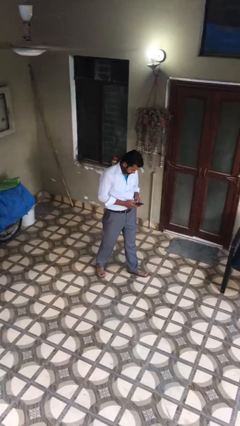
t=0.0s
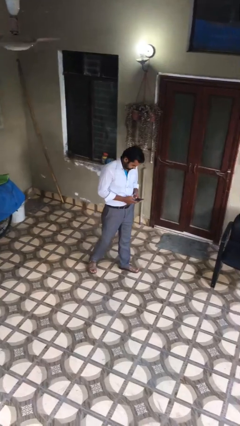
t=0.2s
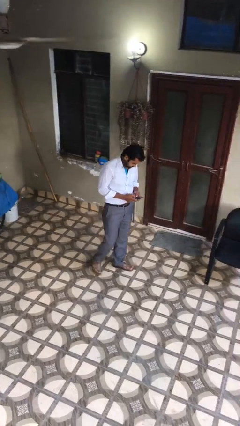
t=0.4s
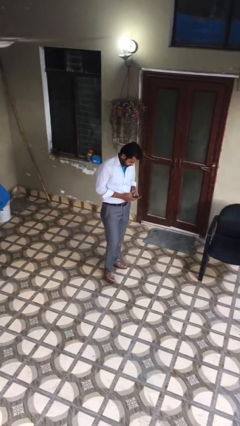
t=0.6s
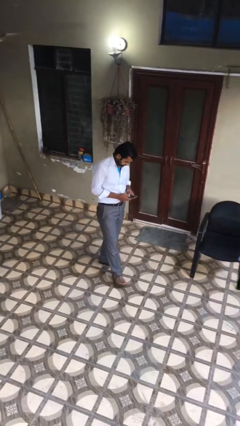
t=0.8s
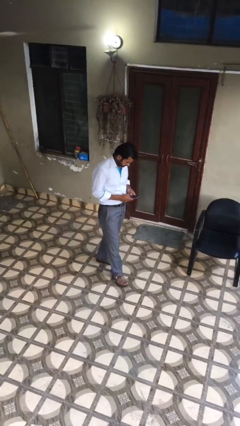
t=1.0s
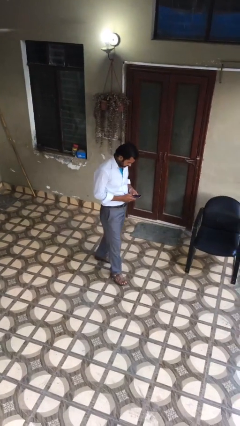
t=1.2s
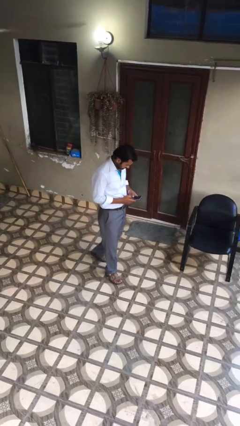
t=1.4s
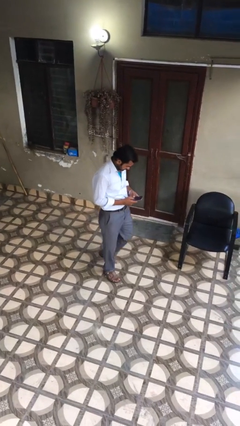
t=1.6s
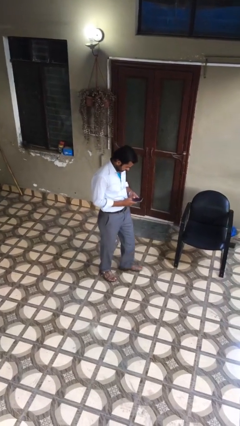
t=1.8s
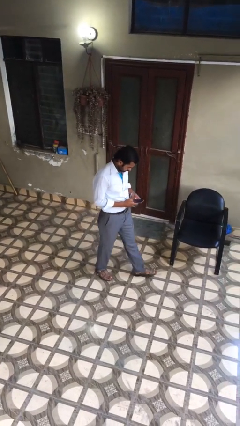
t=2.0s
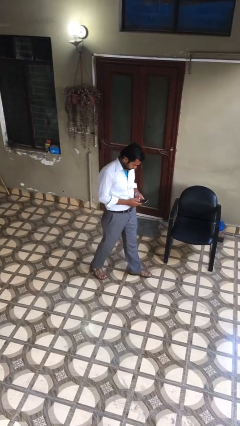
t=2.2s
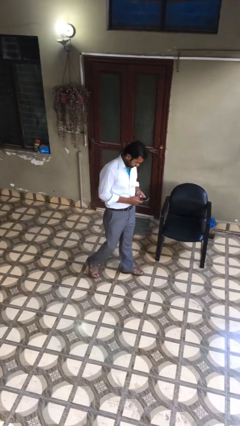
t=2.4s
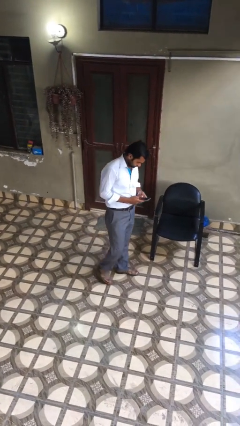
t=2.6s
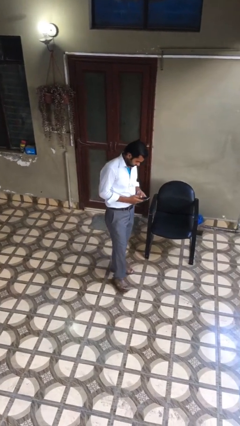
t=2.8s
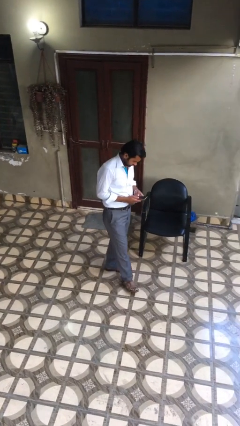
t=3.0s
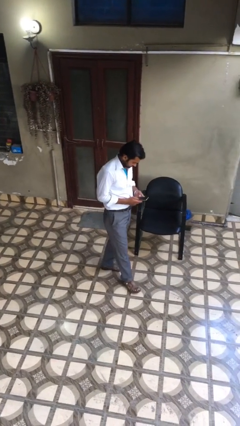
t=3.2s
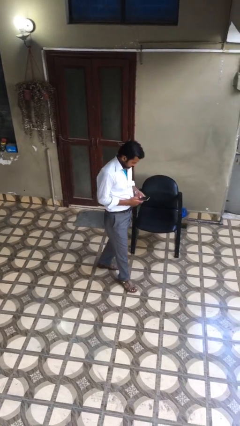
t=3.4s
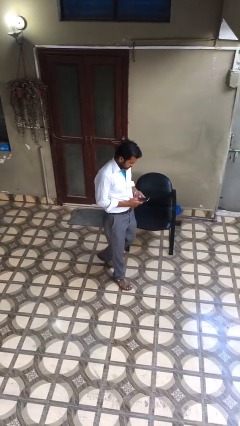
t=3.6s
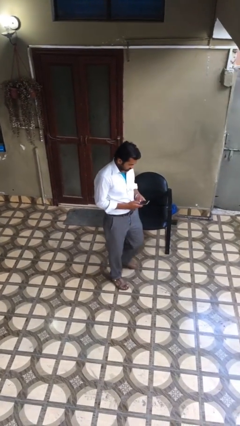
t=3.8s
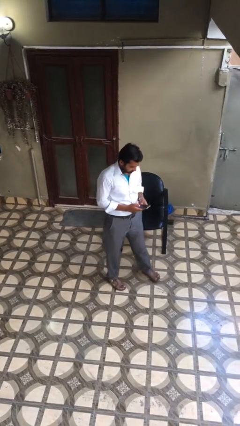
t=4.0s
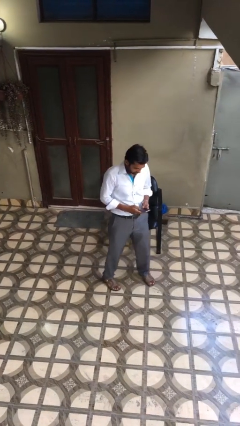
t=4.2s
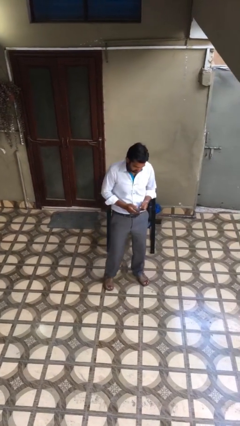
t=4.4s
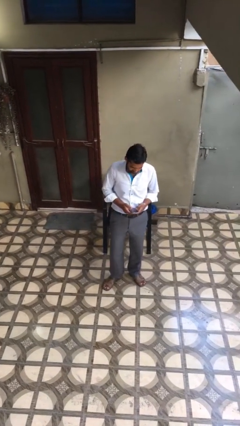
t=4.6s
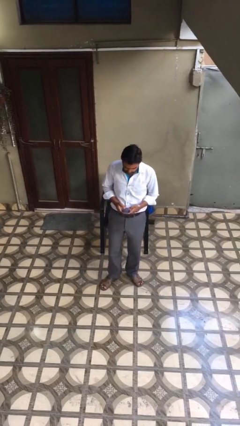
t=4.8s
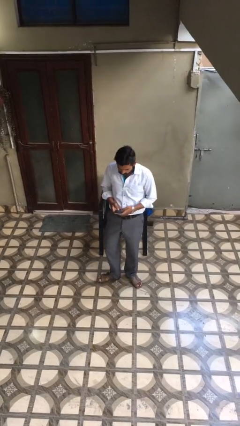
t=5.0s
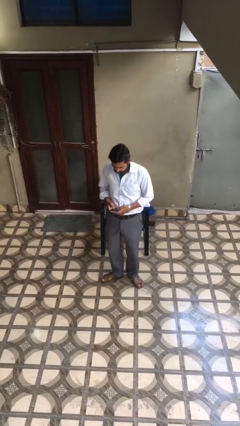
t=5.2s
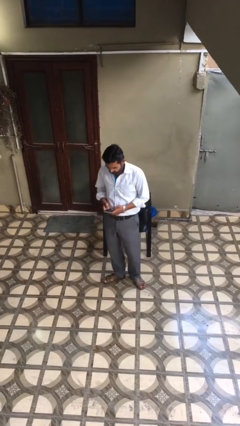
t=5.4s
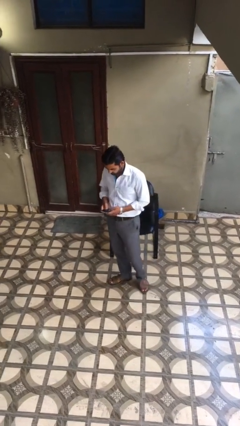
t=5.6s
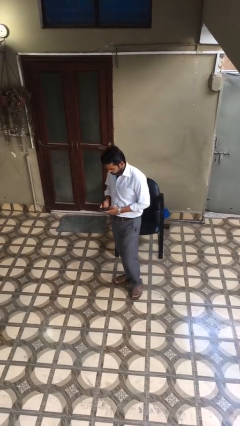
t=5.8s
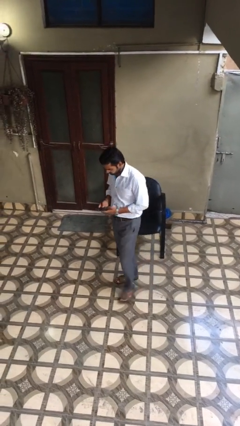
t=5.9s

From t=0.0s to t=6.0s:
person texts on phone

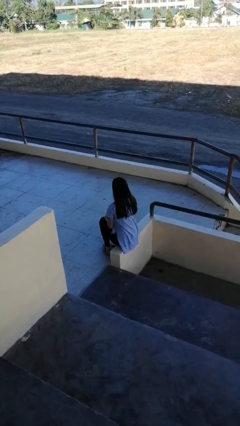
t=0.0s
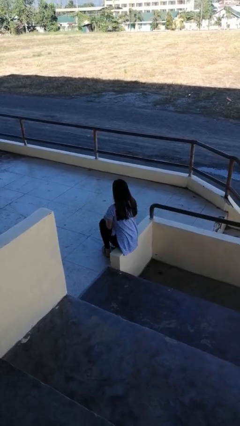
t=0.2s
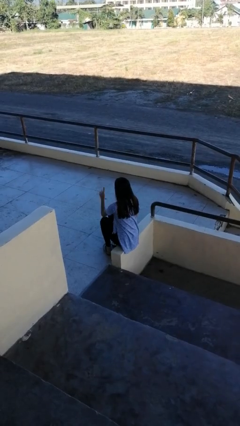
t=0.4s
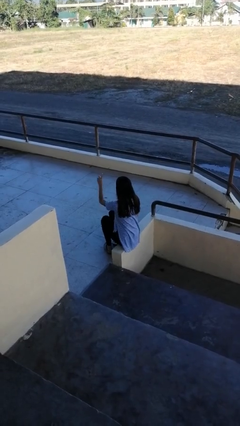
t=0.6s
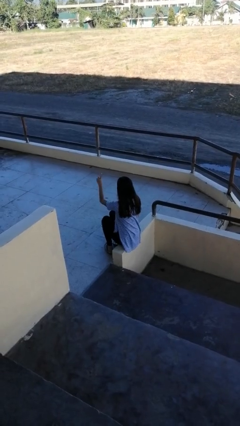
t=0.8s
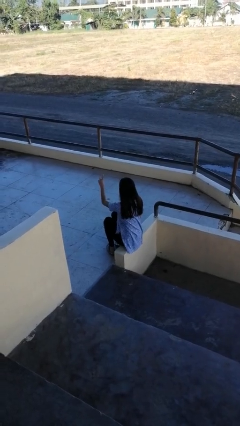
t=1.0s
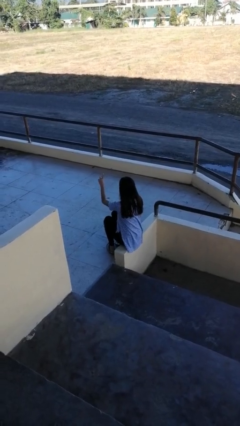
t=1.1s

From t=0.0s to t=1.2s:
person gestures number one

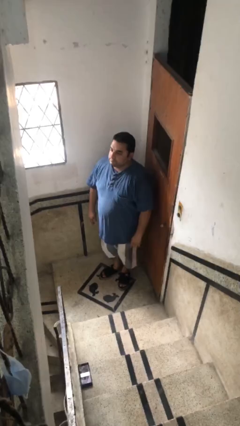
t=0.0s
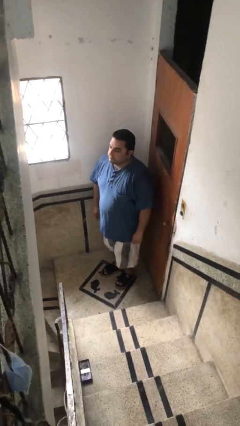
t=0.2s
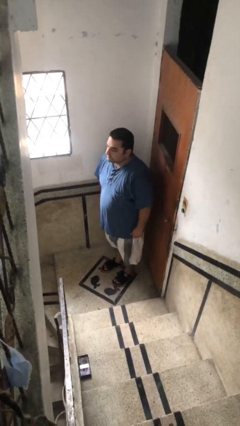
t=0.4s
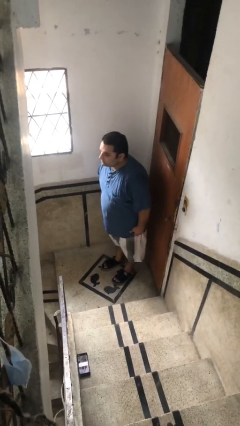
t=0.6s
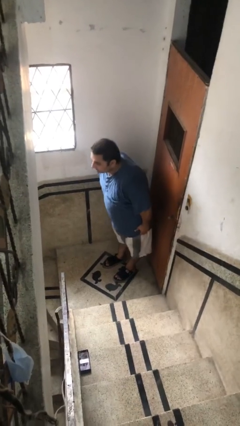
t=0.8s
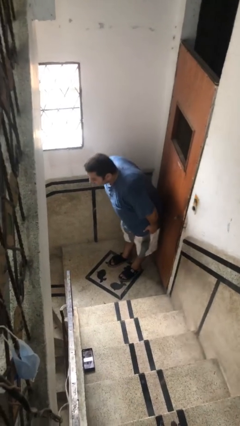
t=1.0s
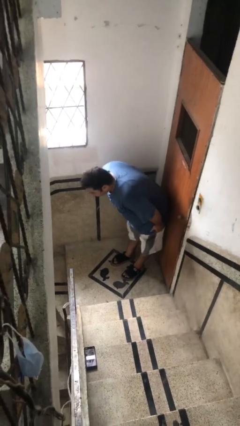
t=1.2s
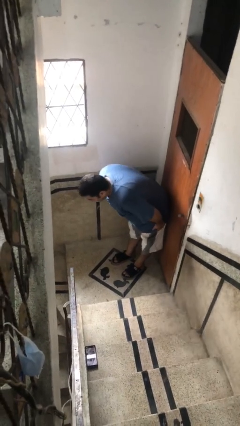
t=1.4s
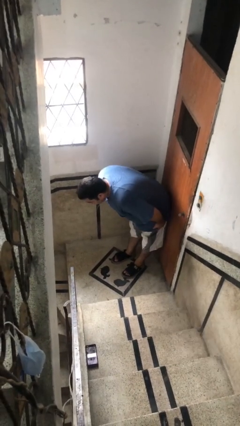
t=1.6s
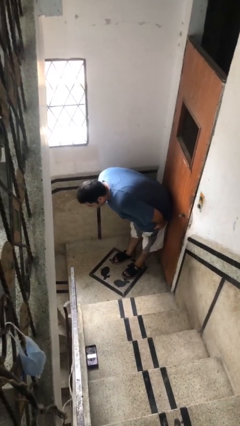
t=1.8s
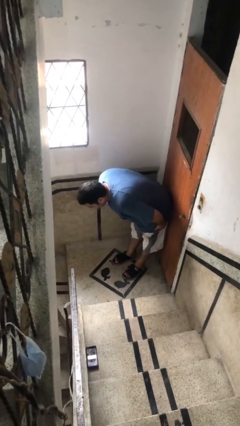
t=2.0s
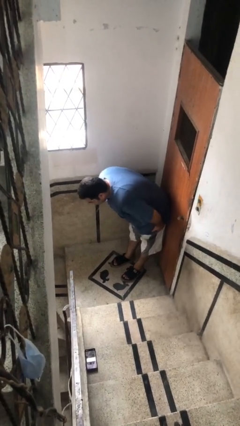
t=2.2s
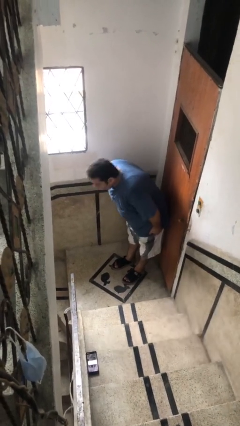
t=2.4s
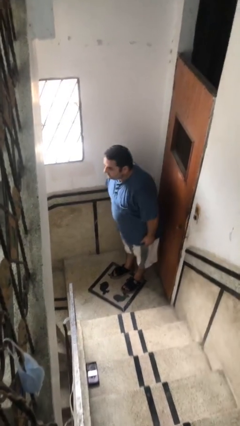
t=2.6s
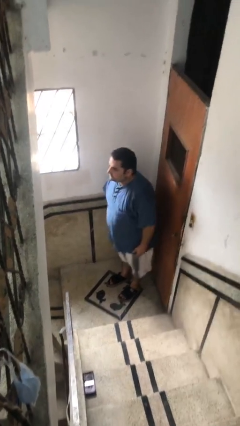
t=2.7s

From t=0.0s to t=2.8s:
person bows

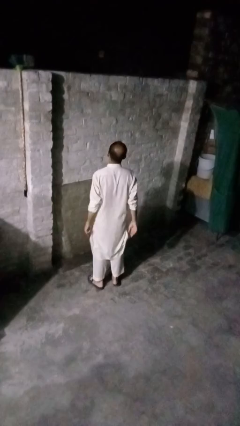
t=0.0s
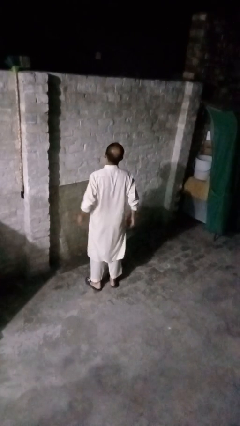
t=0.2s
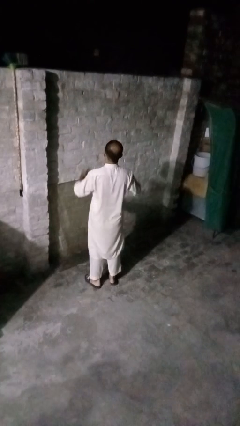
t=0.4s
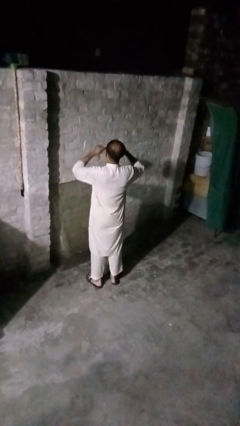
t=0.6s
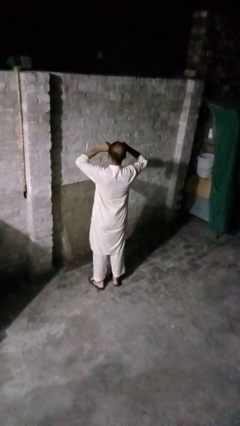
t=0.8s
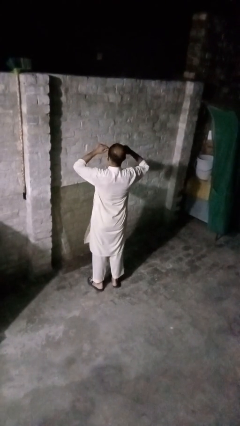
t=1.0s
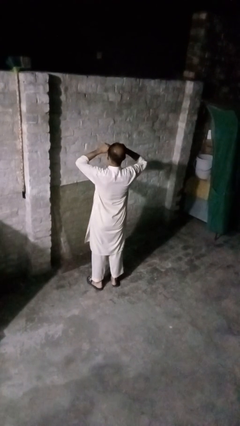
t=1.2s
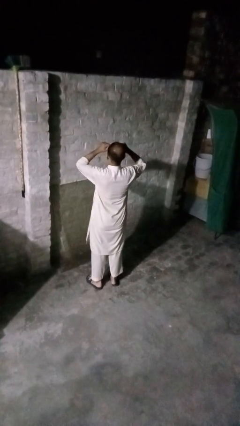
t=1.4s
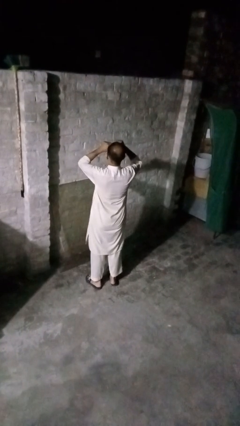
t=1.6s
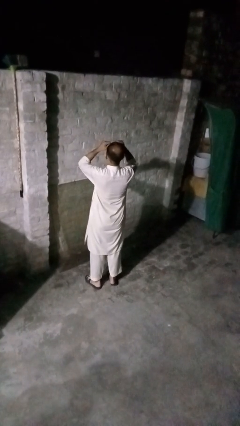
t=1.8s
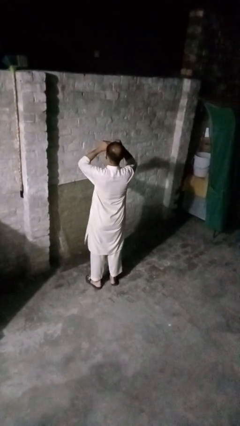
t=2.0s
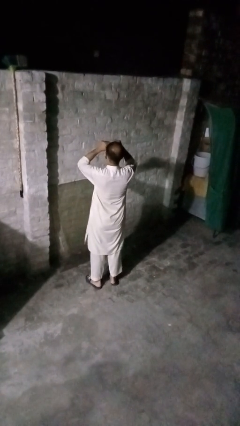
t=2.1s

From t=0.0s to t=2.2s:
person rubs eyes

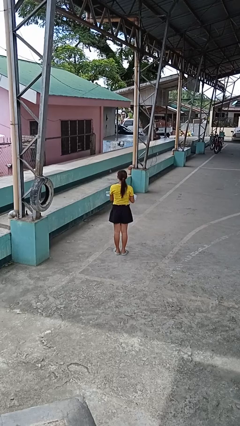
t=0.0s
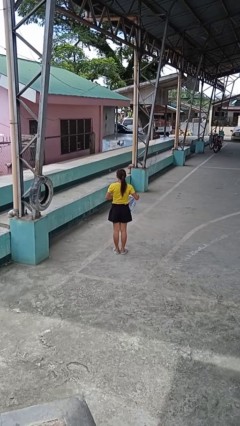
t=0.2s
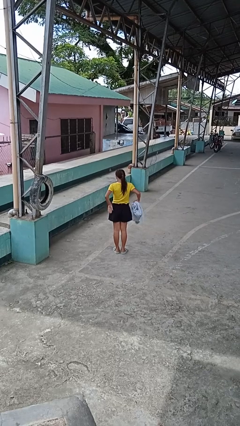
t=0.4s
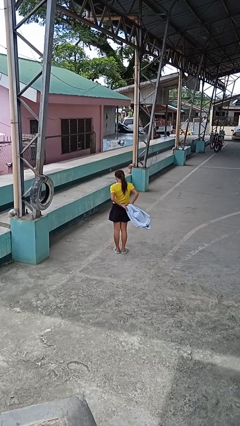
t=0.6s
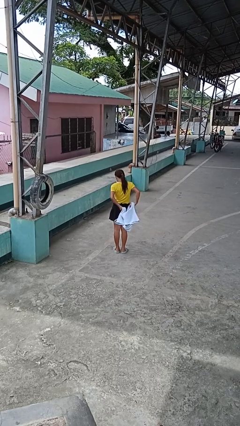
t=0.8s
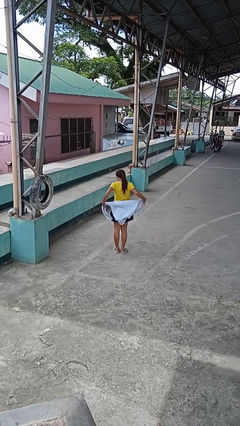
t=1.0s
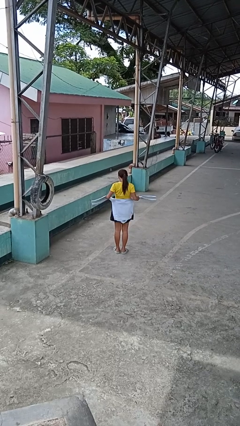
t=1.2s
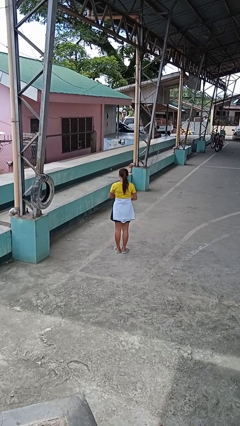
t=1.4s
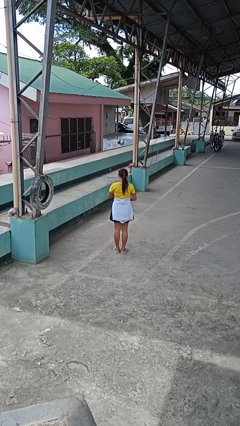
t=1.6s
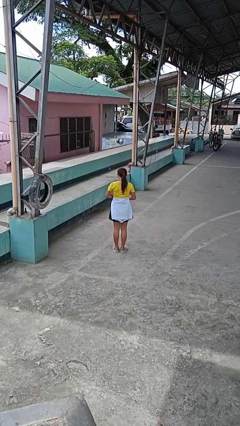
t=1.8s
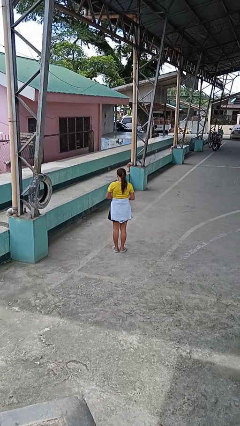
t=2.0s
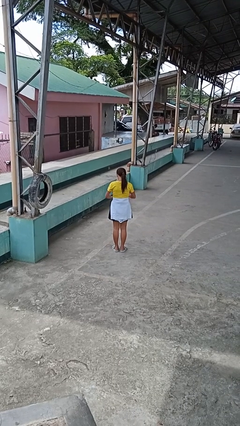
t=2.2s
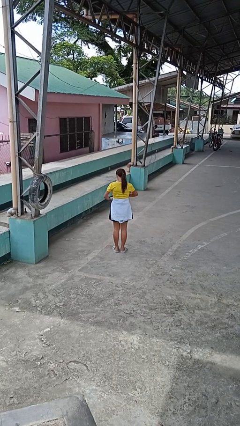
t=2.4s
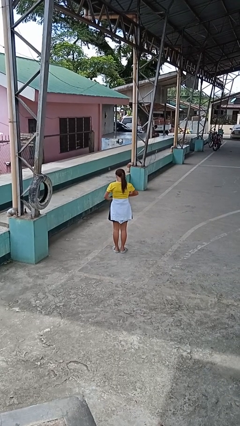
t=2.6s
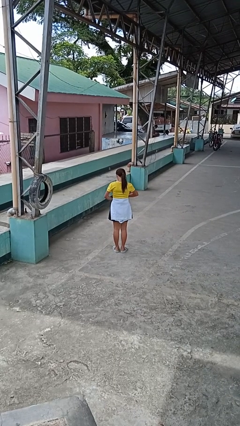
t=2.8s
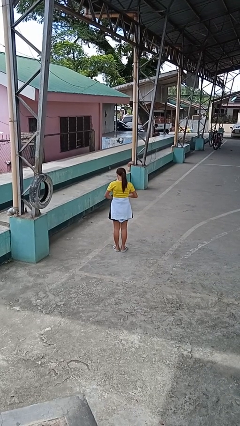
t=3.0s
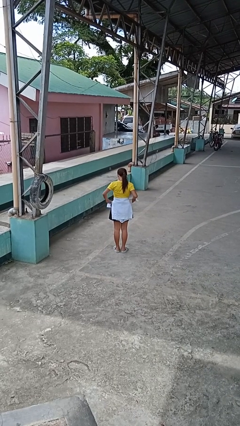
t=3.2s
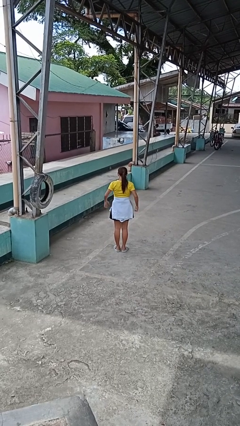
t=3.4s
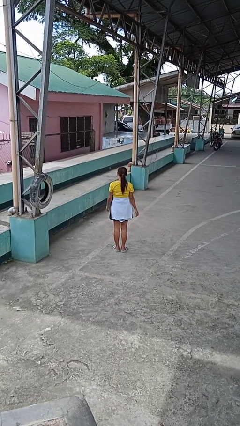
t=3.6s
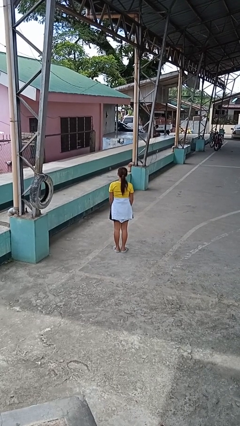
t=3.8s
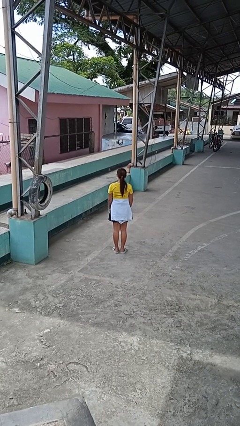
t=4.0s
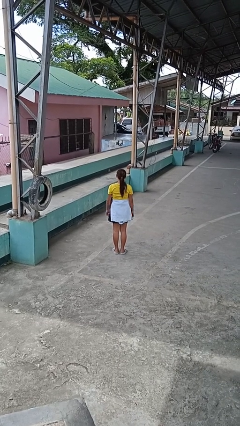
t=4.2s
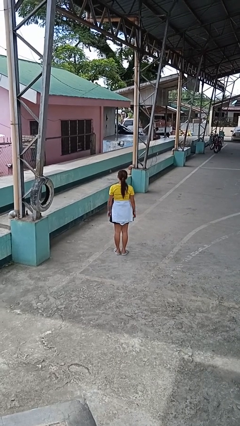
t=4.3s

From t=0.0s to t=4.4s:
person ties jacket around waist

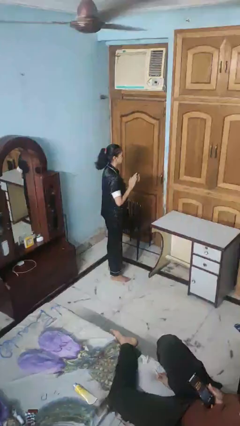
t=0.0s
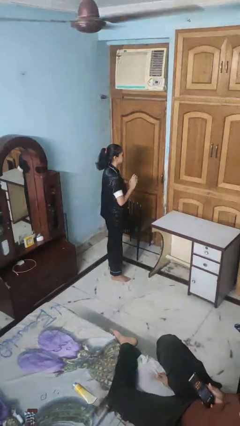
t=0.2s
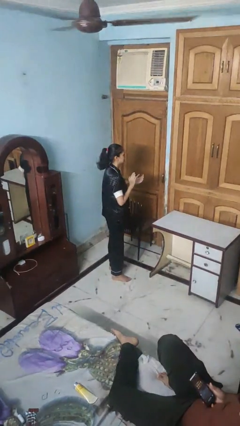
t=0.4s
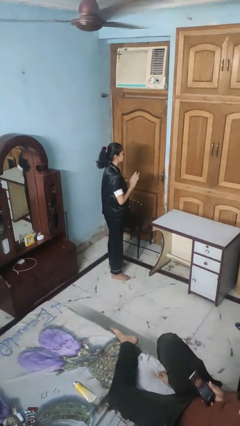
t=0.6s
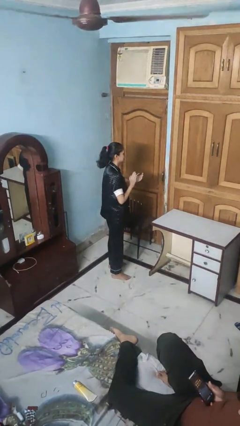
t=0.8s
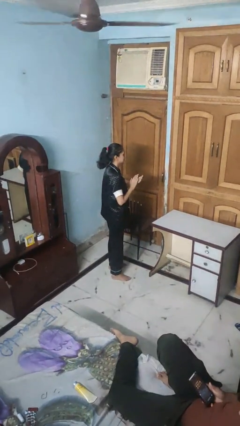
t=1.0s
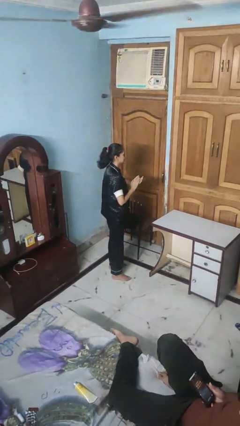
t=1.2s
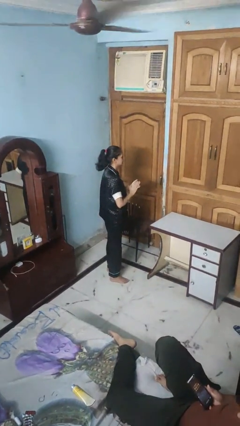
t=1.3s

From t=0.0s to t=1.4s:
person claps hands
